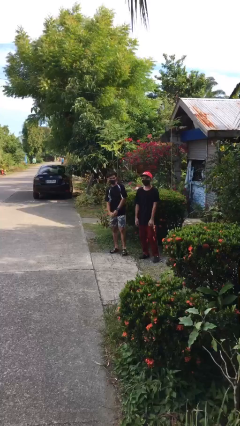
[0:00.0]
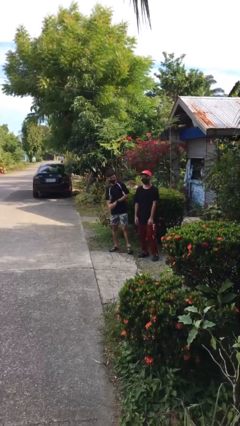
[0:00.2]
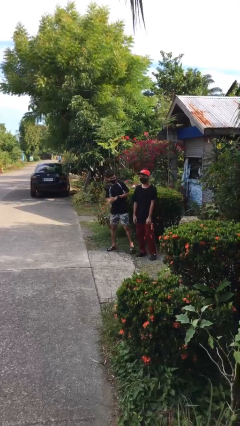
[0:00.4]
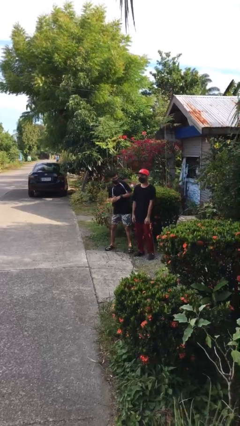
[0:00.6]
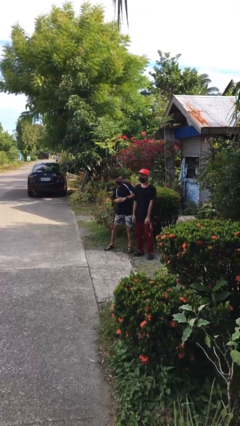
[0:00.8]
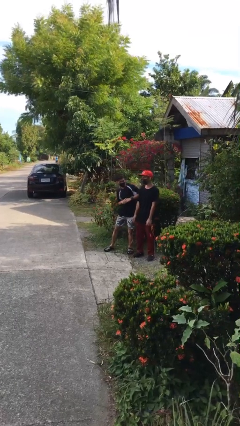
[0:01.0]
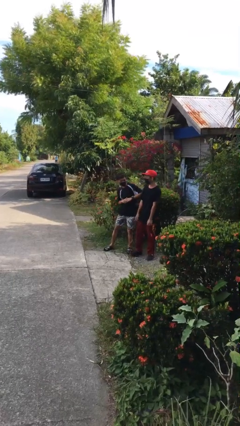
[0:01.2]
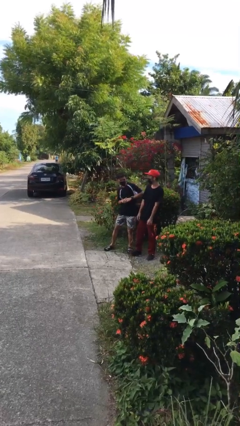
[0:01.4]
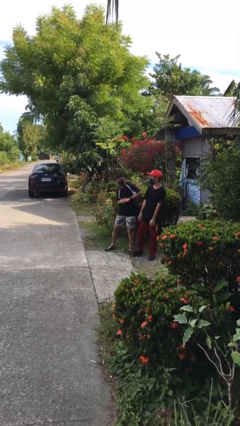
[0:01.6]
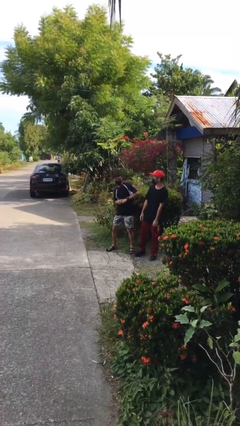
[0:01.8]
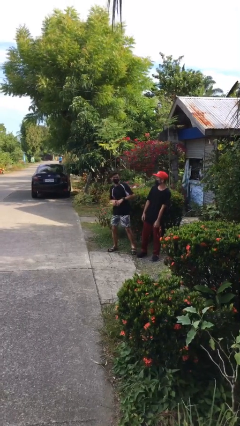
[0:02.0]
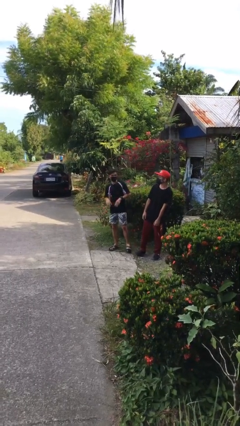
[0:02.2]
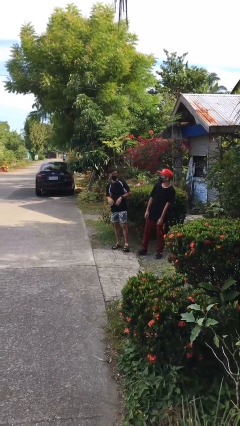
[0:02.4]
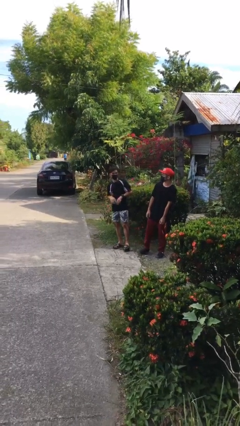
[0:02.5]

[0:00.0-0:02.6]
person nudges person with elbow

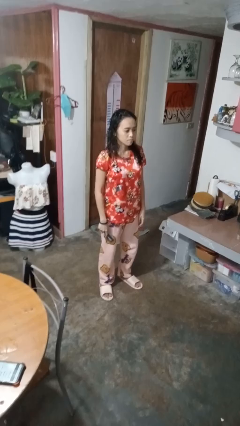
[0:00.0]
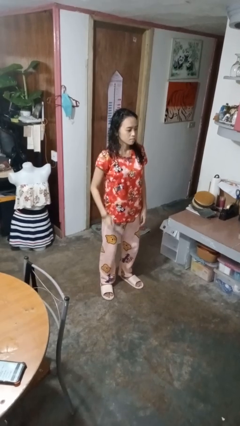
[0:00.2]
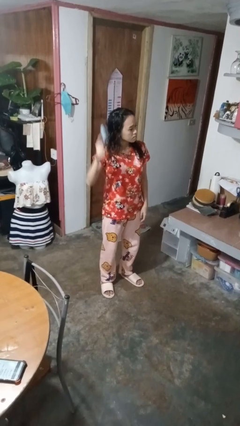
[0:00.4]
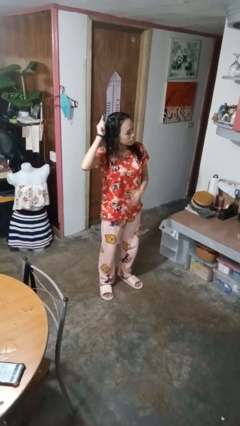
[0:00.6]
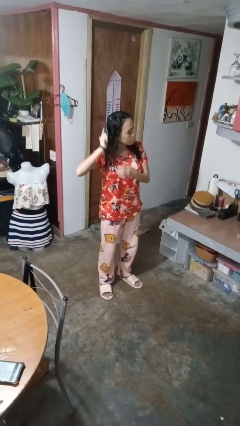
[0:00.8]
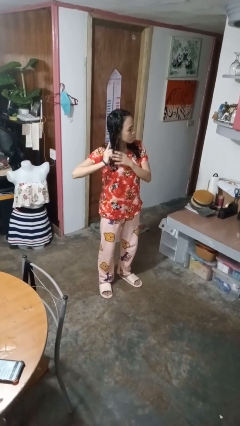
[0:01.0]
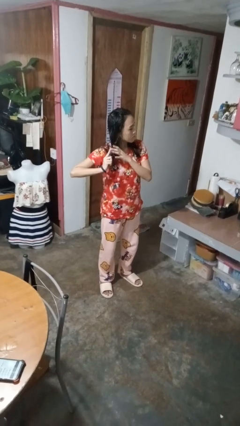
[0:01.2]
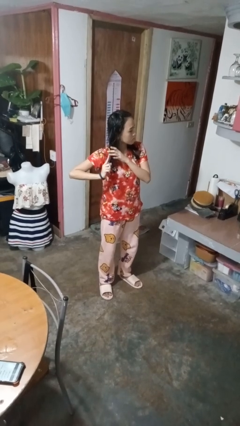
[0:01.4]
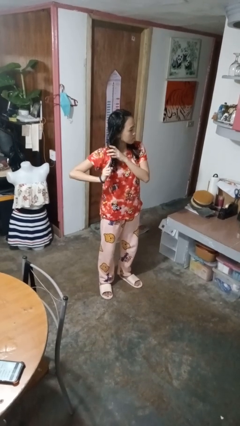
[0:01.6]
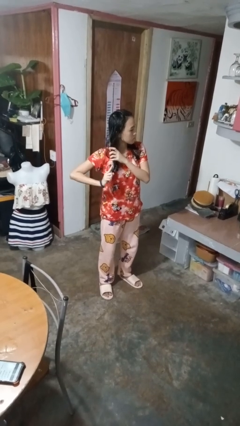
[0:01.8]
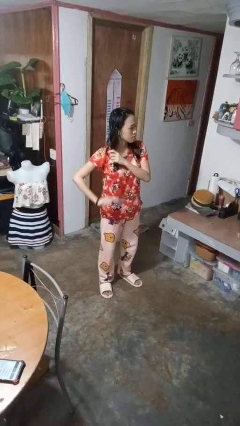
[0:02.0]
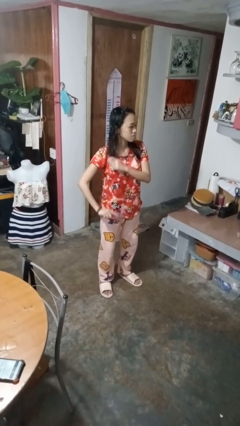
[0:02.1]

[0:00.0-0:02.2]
person brushes hair

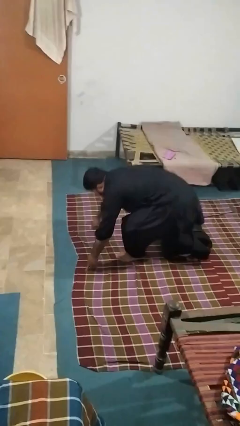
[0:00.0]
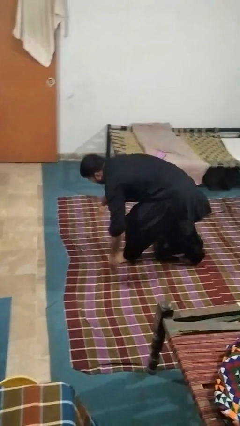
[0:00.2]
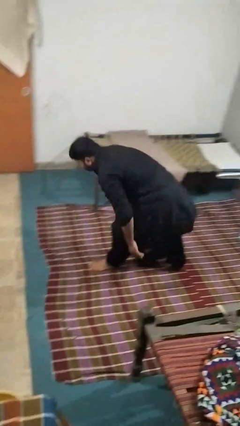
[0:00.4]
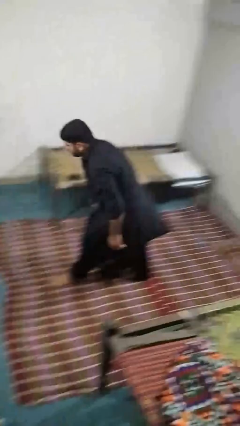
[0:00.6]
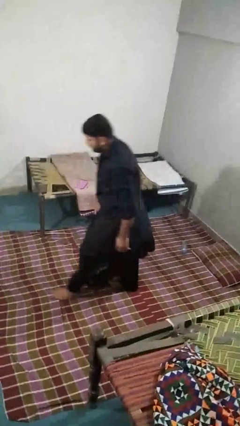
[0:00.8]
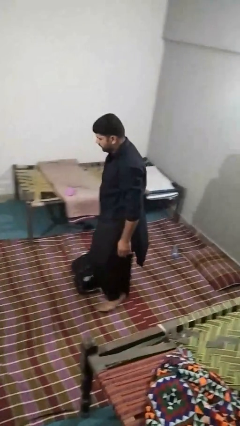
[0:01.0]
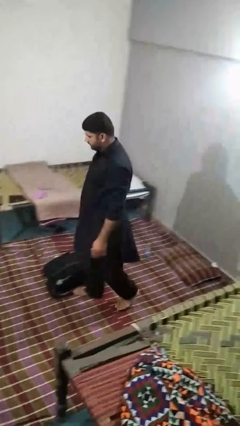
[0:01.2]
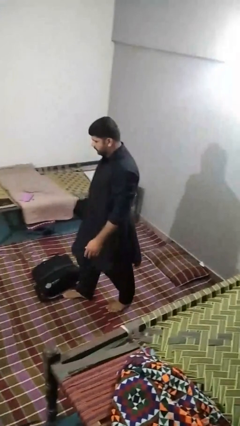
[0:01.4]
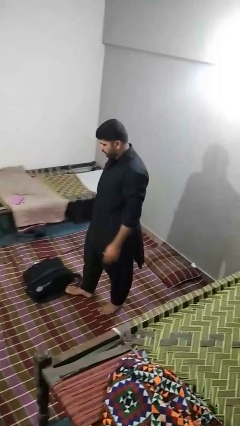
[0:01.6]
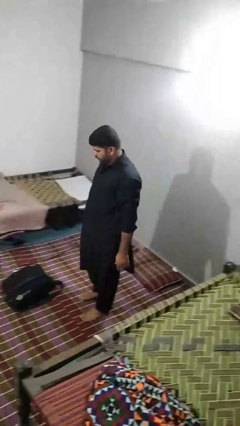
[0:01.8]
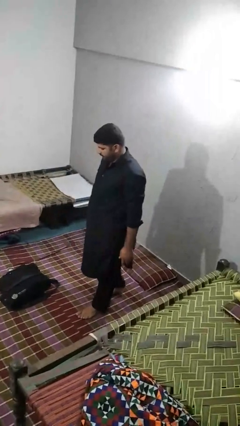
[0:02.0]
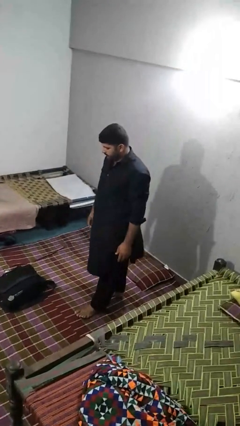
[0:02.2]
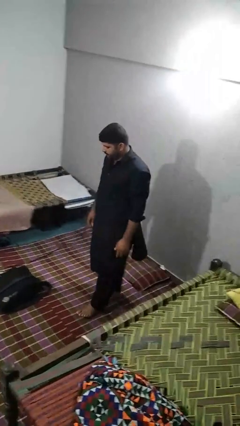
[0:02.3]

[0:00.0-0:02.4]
person stands up from floor

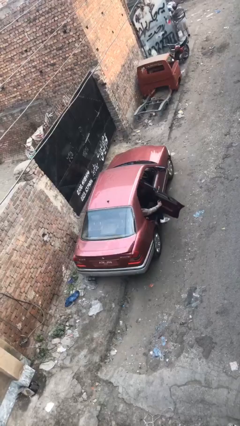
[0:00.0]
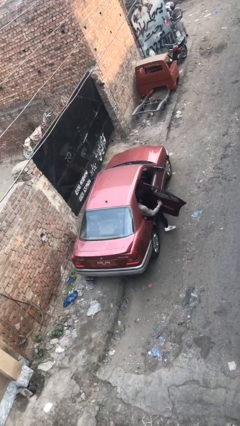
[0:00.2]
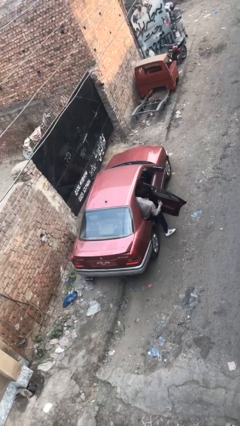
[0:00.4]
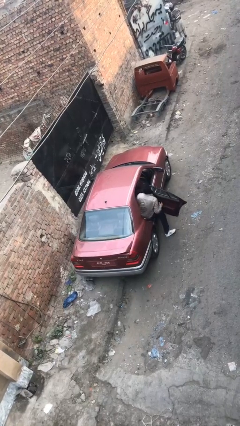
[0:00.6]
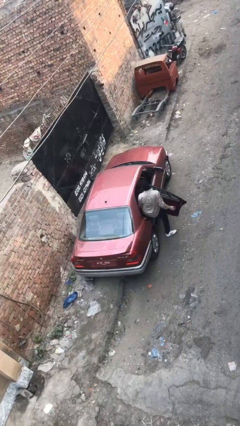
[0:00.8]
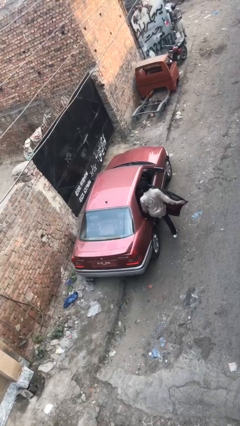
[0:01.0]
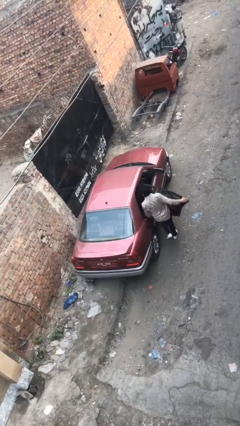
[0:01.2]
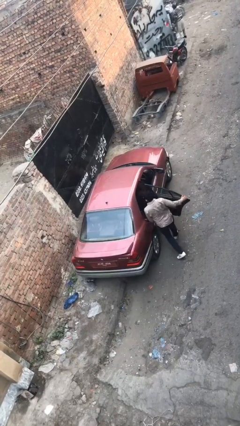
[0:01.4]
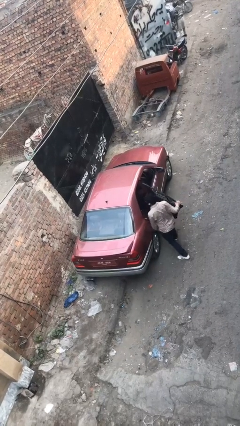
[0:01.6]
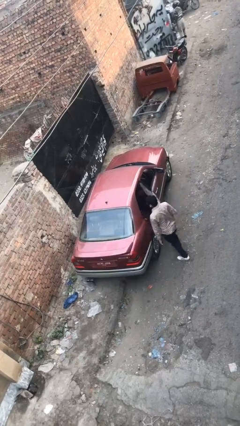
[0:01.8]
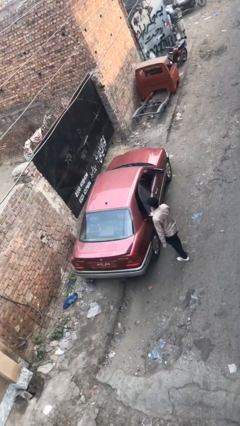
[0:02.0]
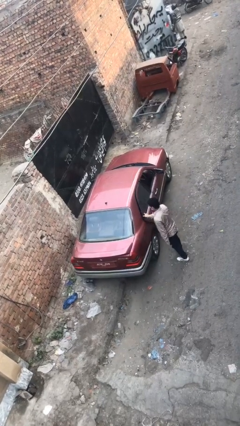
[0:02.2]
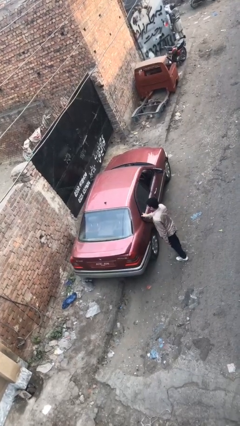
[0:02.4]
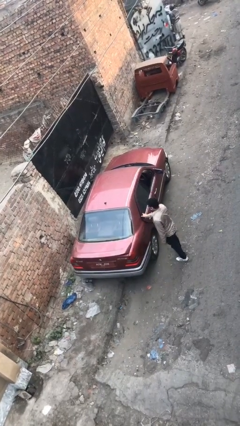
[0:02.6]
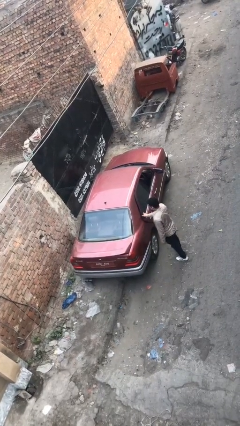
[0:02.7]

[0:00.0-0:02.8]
car drops off person

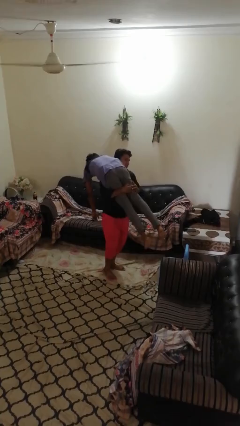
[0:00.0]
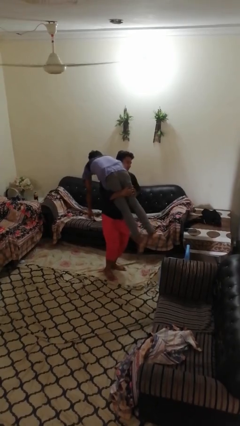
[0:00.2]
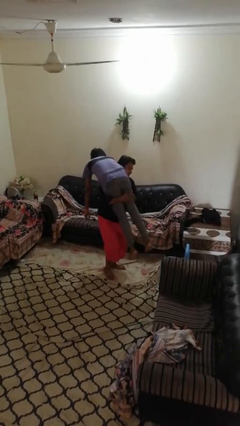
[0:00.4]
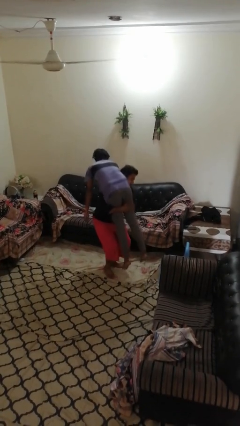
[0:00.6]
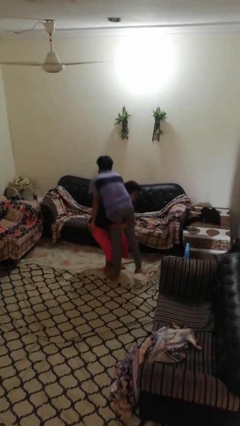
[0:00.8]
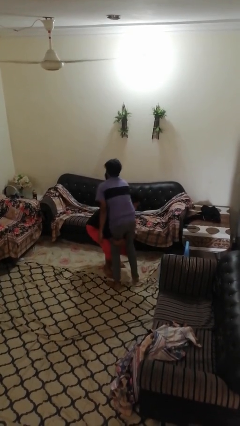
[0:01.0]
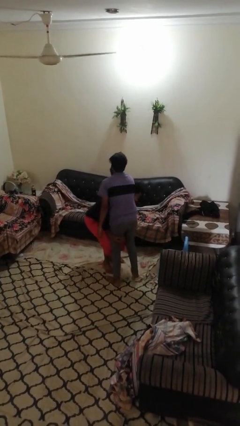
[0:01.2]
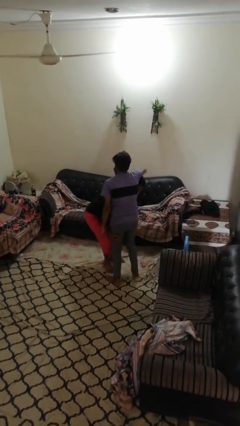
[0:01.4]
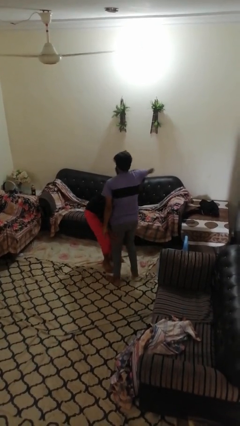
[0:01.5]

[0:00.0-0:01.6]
person puts down person

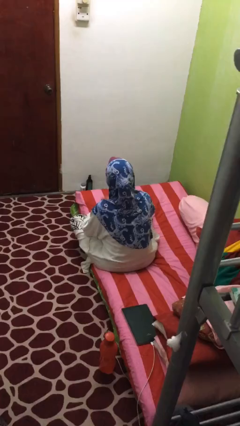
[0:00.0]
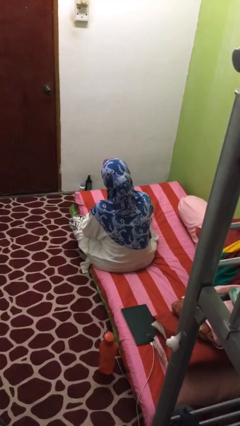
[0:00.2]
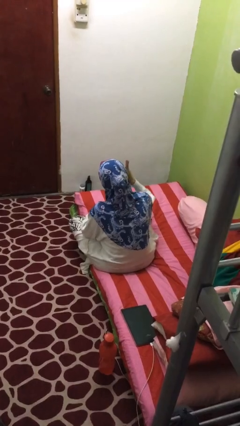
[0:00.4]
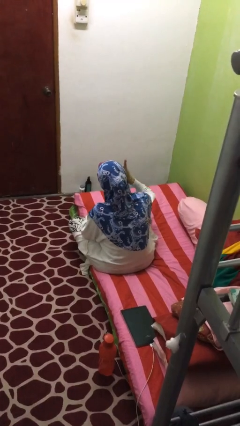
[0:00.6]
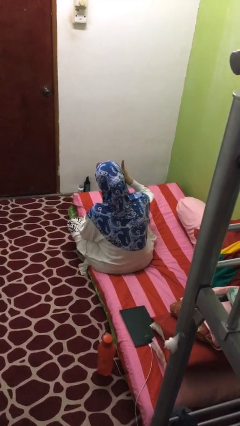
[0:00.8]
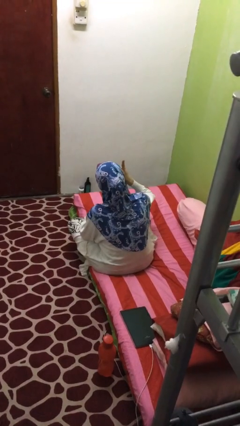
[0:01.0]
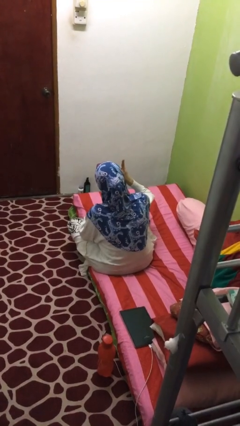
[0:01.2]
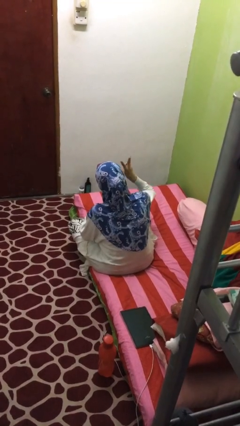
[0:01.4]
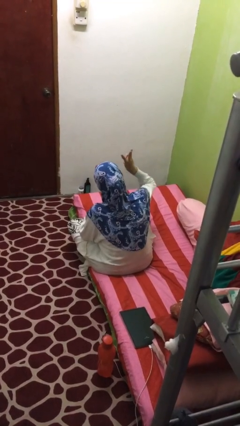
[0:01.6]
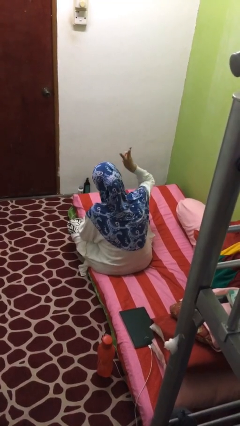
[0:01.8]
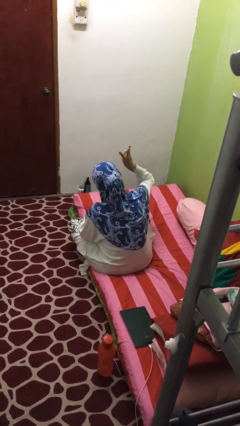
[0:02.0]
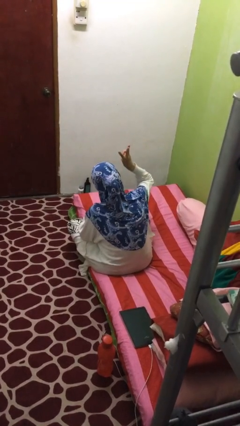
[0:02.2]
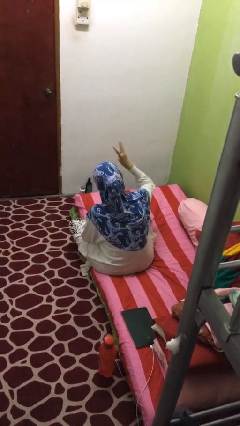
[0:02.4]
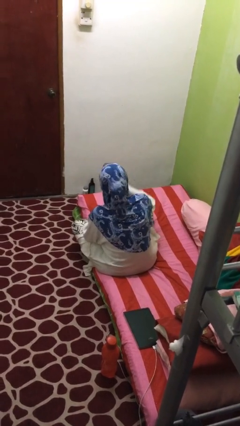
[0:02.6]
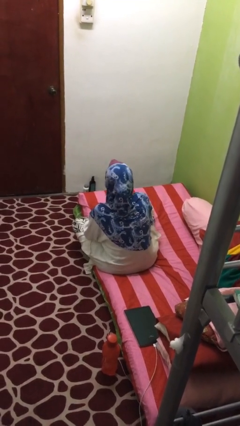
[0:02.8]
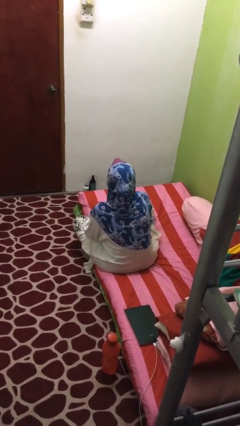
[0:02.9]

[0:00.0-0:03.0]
person gestures number three

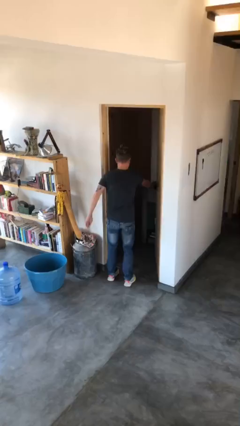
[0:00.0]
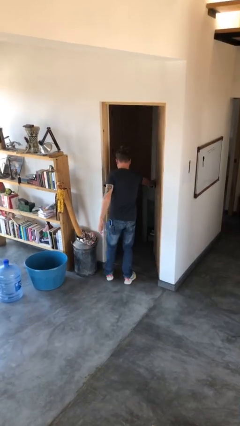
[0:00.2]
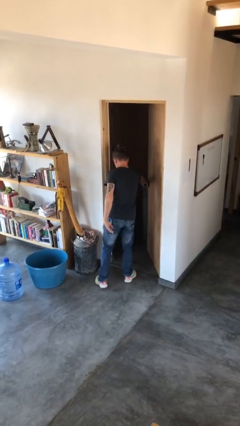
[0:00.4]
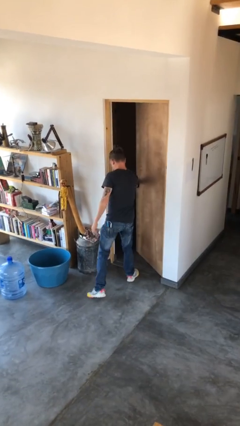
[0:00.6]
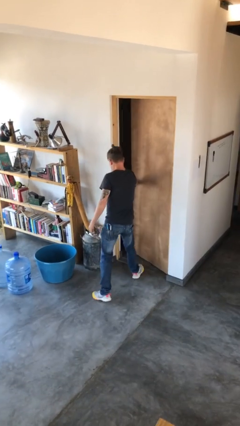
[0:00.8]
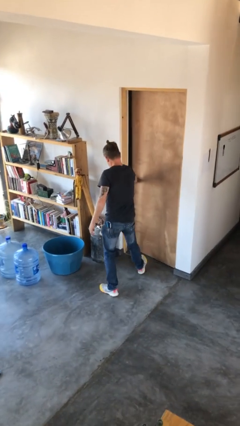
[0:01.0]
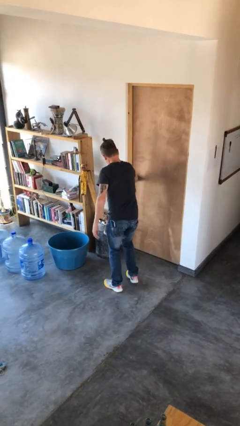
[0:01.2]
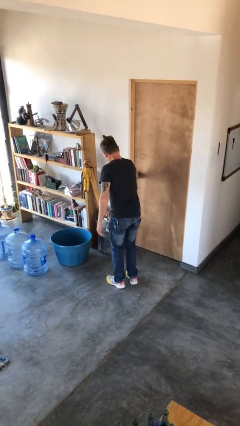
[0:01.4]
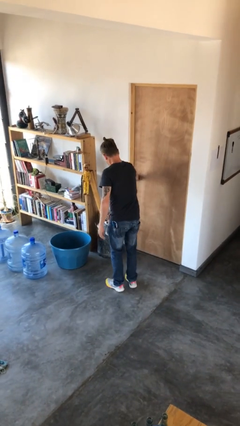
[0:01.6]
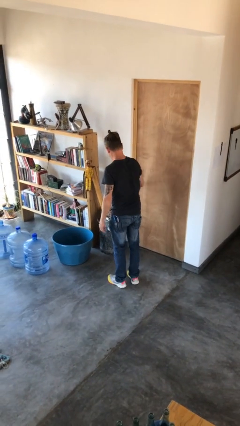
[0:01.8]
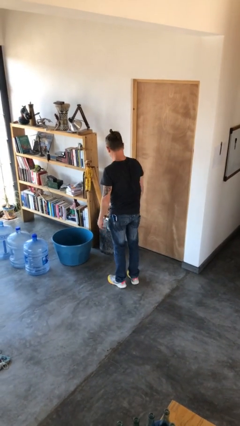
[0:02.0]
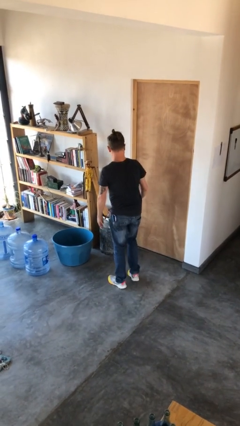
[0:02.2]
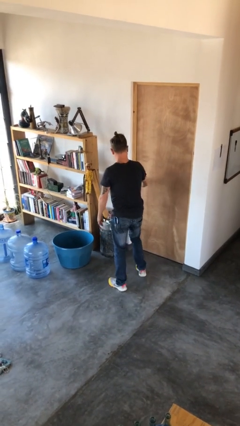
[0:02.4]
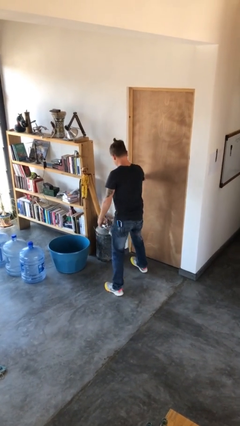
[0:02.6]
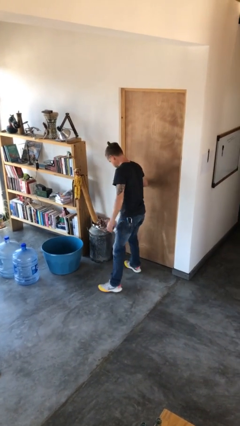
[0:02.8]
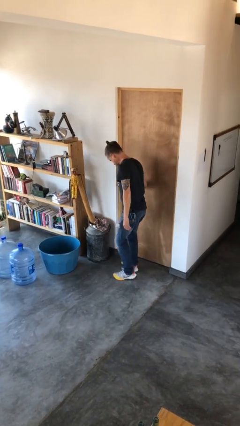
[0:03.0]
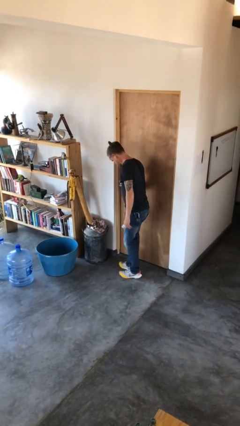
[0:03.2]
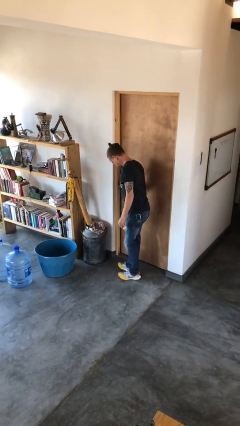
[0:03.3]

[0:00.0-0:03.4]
person closes facility door
